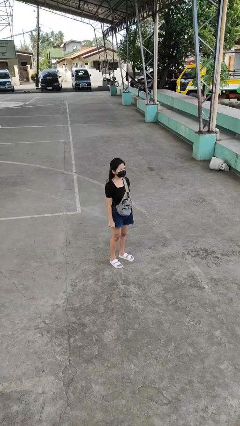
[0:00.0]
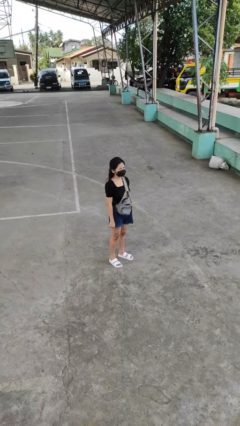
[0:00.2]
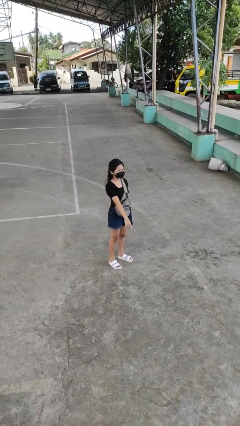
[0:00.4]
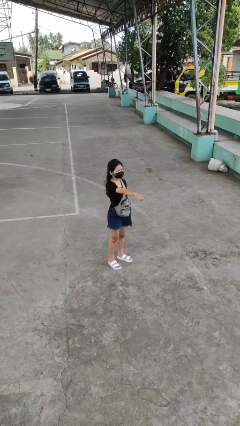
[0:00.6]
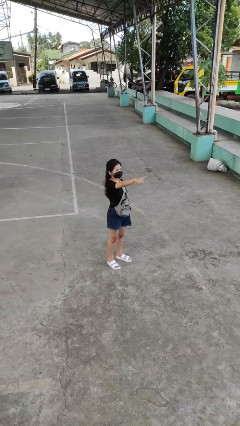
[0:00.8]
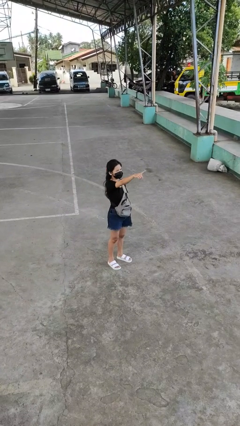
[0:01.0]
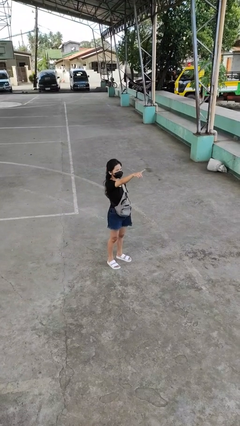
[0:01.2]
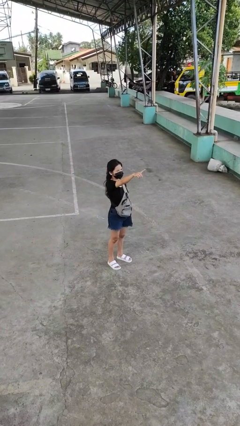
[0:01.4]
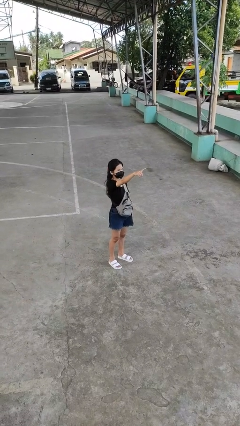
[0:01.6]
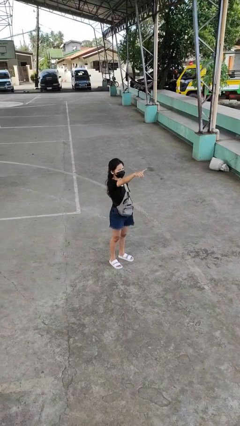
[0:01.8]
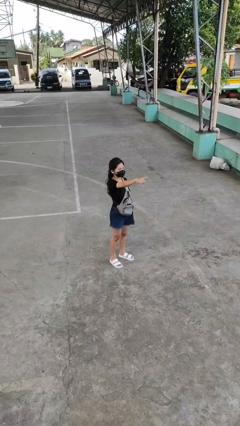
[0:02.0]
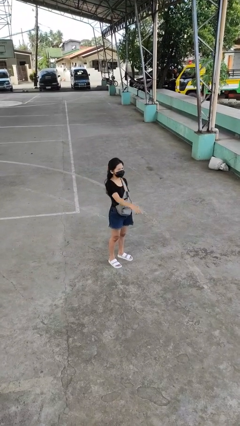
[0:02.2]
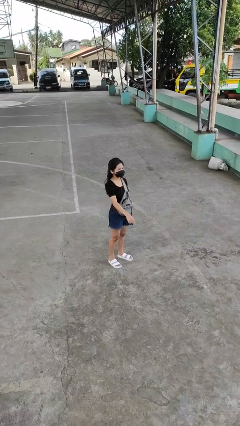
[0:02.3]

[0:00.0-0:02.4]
person points at person

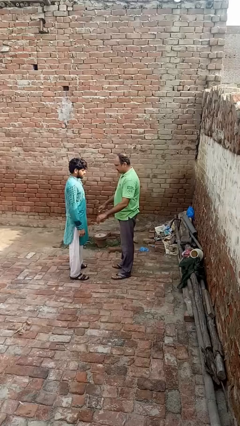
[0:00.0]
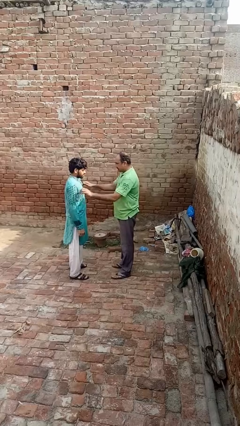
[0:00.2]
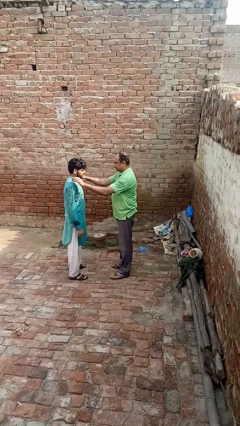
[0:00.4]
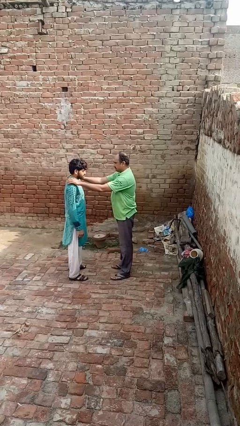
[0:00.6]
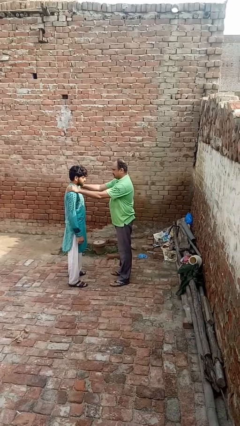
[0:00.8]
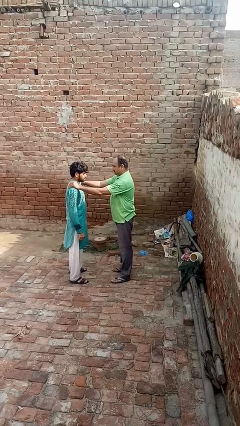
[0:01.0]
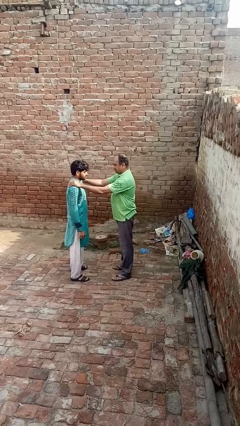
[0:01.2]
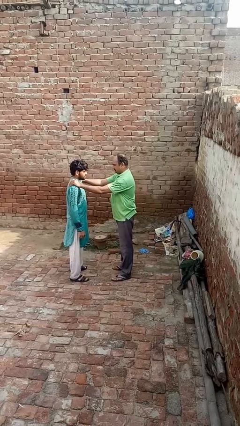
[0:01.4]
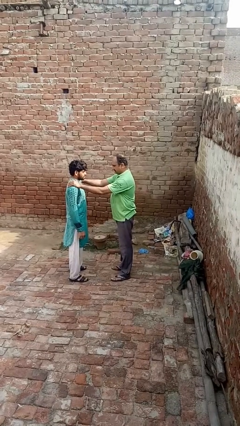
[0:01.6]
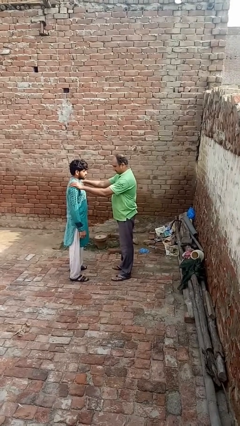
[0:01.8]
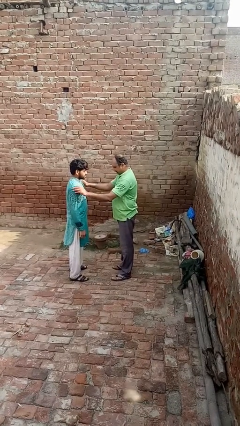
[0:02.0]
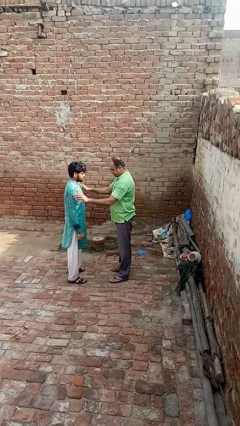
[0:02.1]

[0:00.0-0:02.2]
person pounds shoulders of person

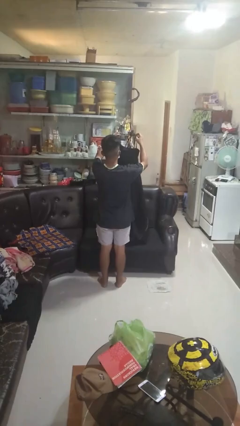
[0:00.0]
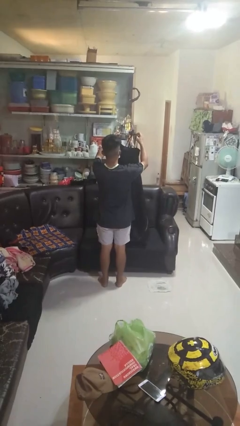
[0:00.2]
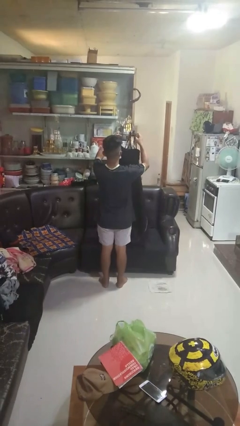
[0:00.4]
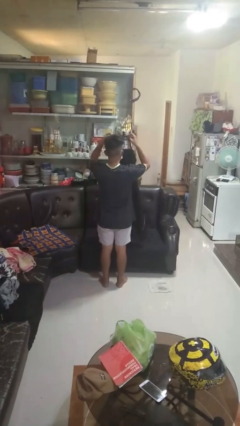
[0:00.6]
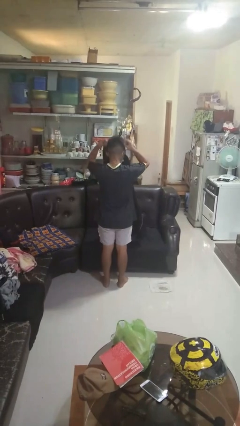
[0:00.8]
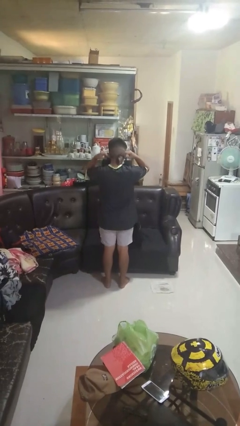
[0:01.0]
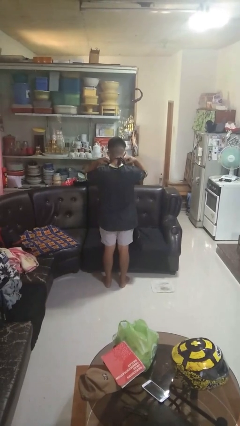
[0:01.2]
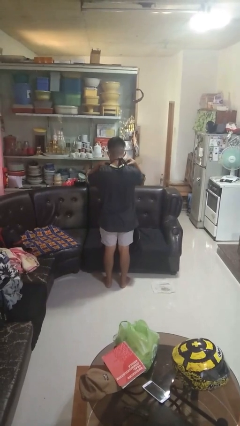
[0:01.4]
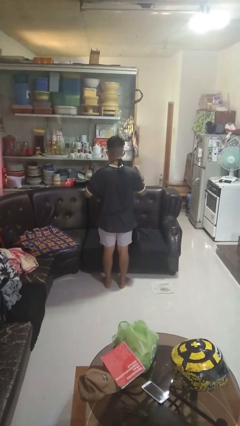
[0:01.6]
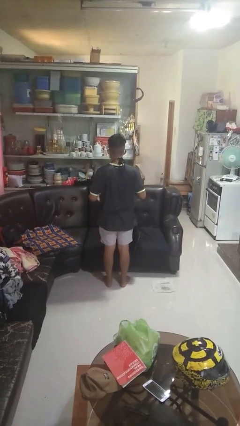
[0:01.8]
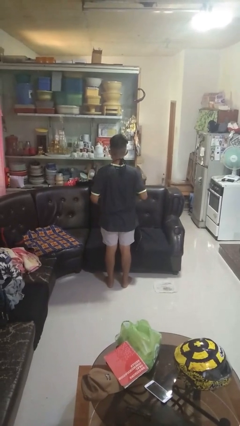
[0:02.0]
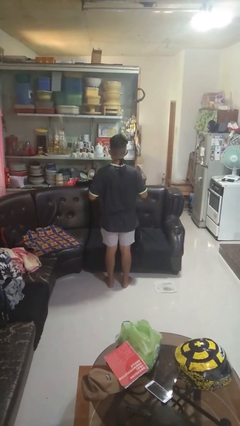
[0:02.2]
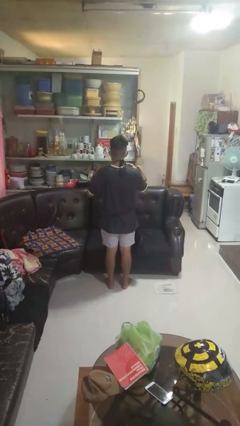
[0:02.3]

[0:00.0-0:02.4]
person puts on apron

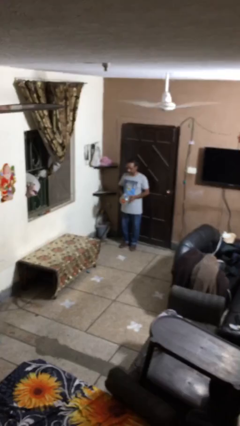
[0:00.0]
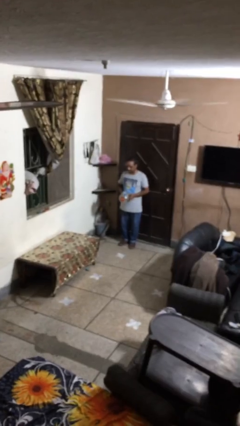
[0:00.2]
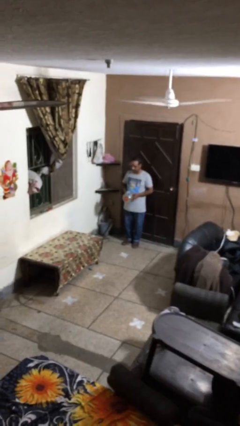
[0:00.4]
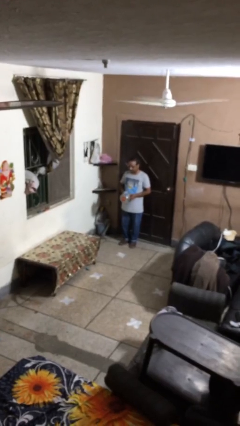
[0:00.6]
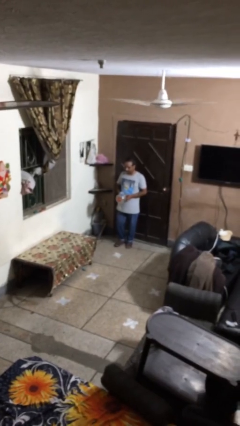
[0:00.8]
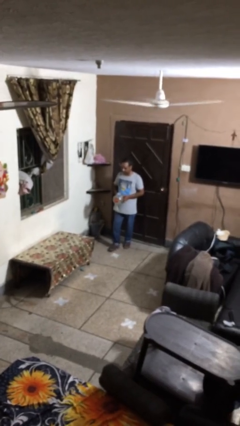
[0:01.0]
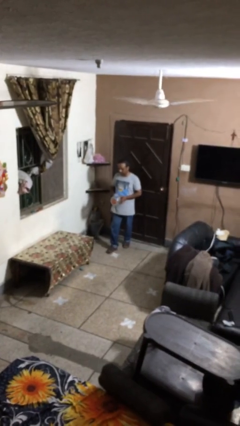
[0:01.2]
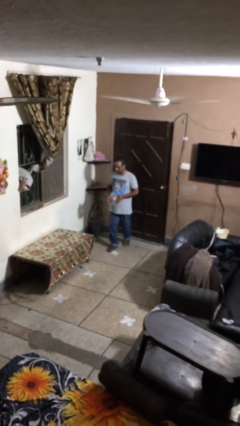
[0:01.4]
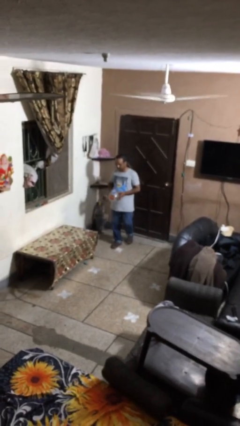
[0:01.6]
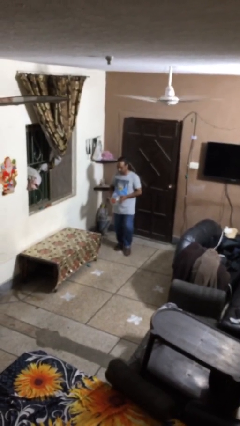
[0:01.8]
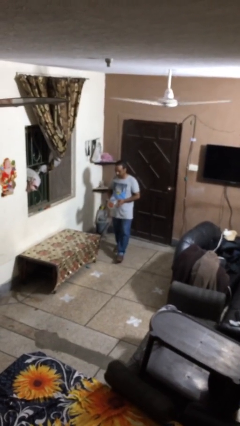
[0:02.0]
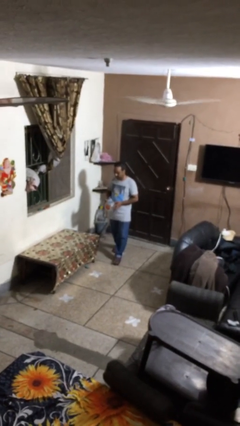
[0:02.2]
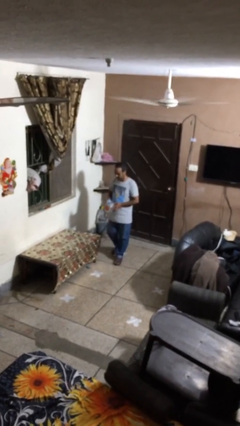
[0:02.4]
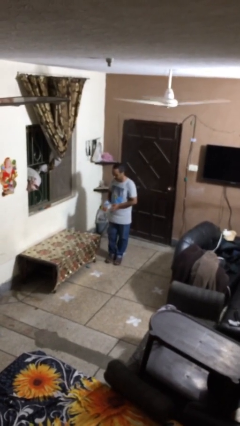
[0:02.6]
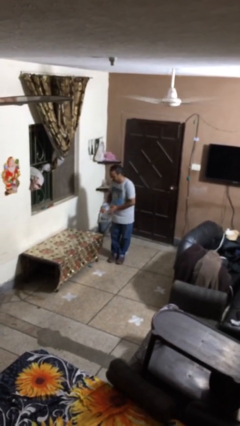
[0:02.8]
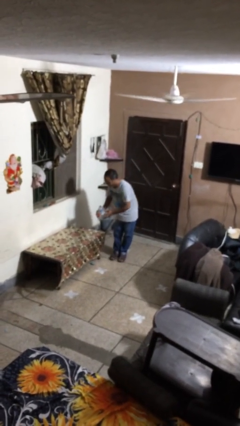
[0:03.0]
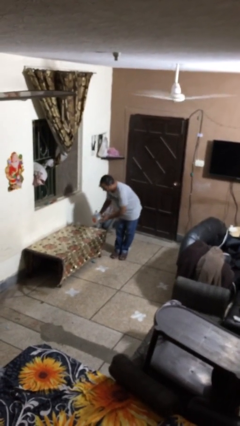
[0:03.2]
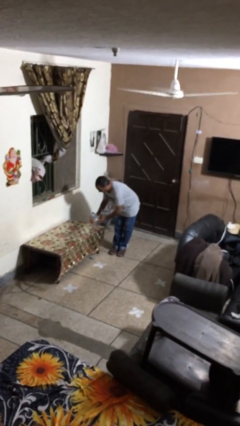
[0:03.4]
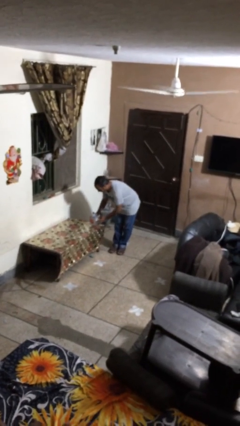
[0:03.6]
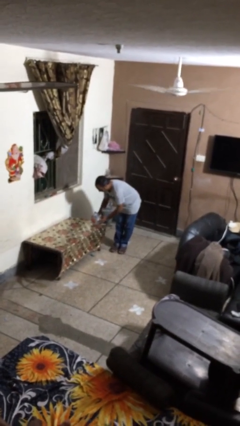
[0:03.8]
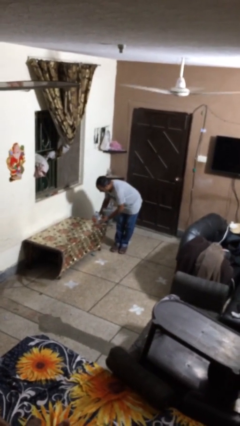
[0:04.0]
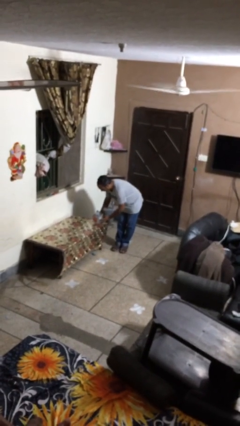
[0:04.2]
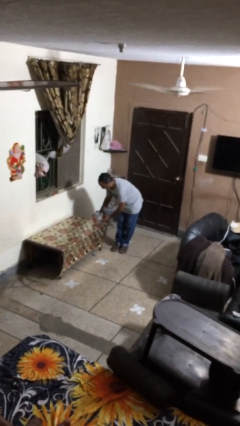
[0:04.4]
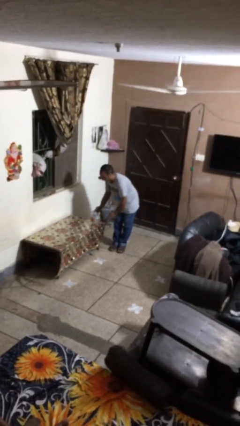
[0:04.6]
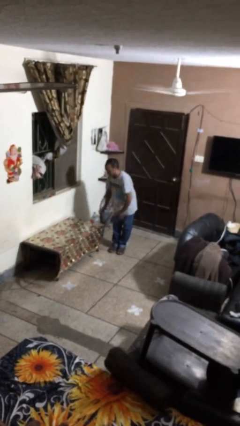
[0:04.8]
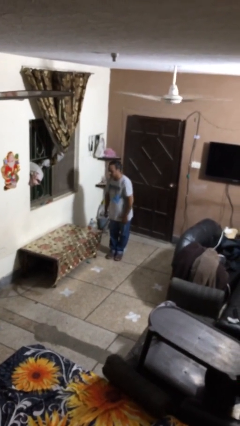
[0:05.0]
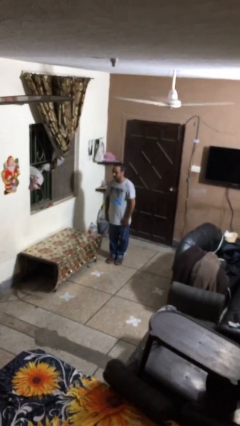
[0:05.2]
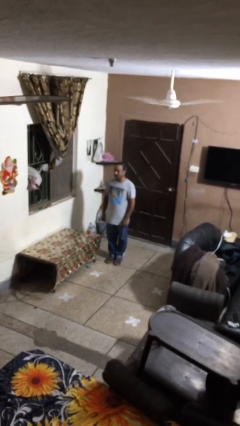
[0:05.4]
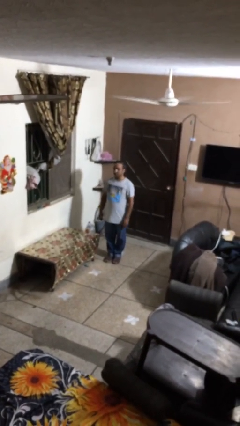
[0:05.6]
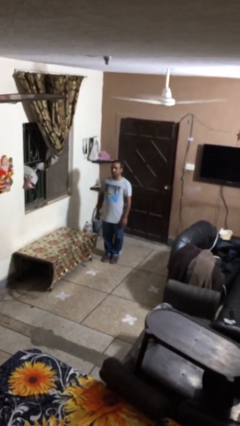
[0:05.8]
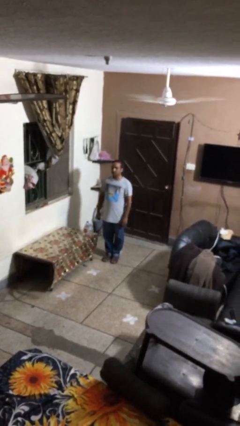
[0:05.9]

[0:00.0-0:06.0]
person puts down object on table

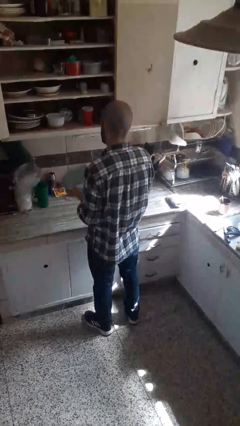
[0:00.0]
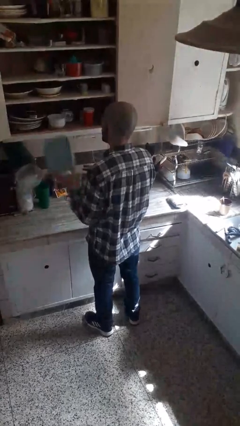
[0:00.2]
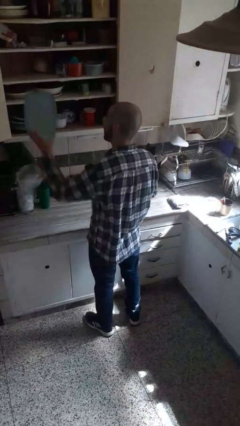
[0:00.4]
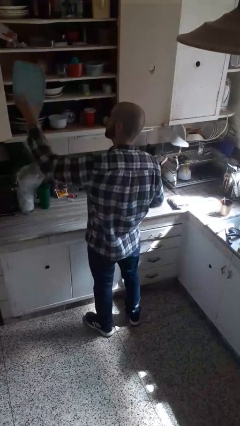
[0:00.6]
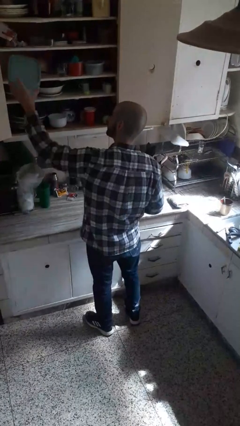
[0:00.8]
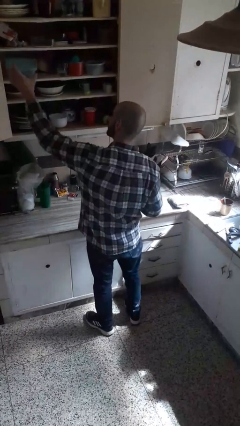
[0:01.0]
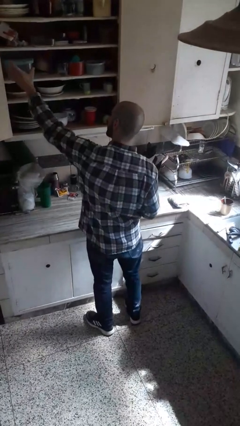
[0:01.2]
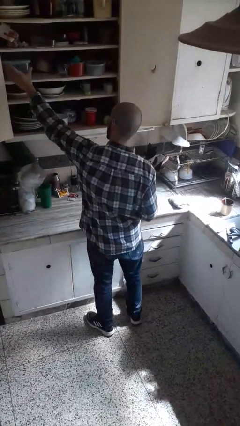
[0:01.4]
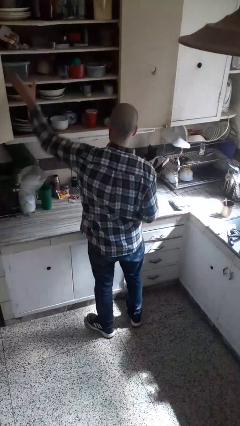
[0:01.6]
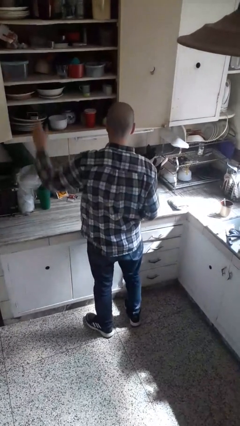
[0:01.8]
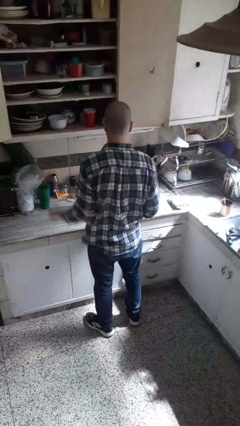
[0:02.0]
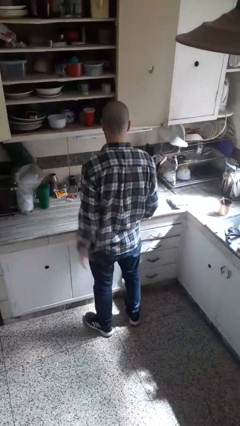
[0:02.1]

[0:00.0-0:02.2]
person puts down object into cabinet

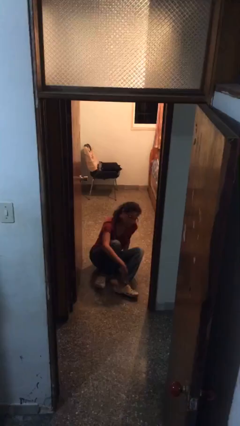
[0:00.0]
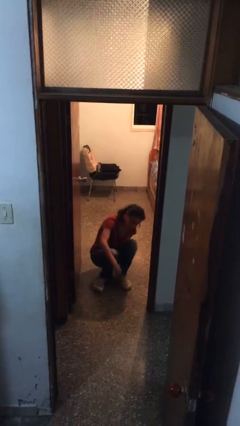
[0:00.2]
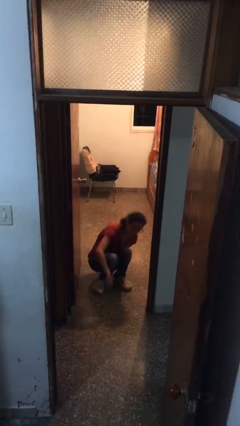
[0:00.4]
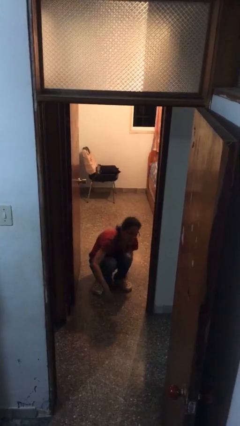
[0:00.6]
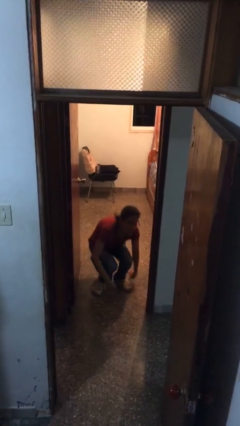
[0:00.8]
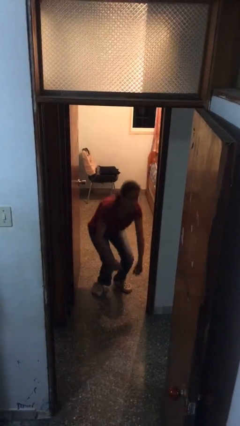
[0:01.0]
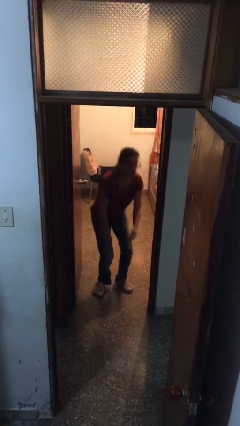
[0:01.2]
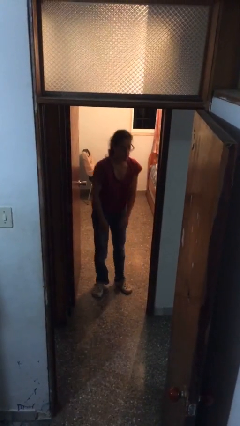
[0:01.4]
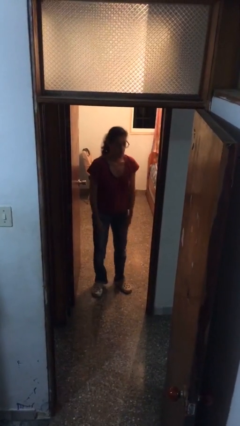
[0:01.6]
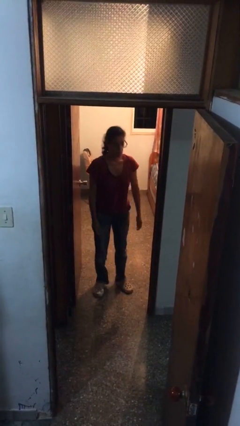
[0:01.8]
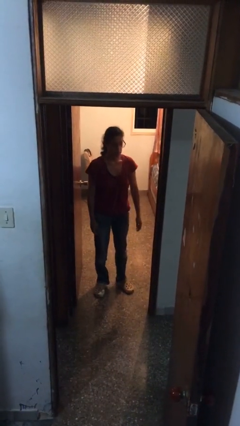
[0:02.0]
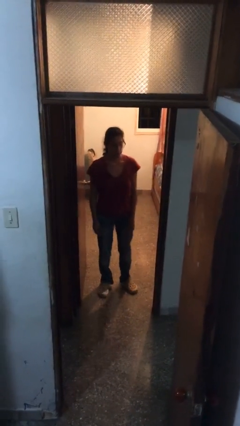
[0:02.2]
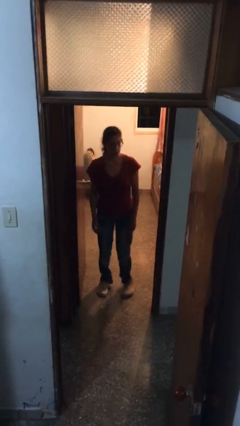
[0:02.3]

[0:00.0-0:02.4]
person stands up
